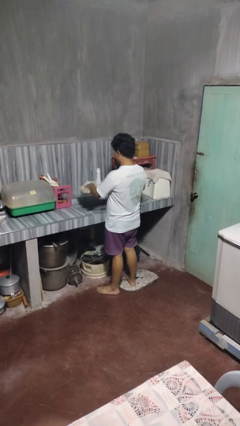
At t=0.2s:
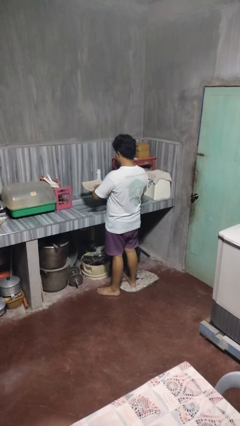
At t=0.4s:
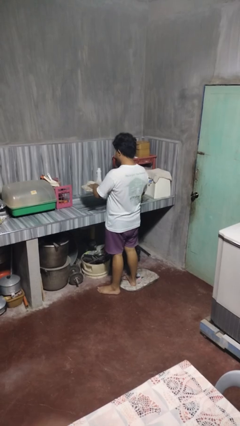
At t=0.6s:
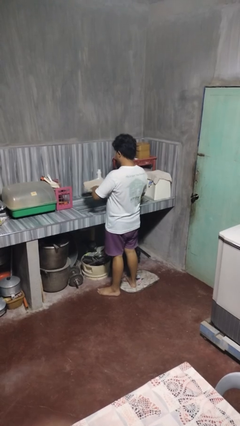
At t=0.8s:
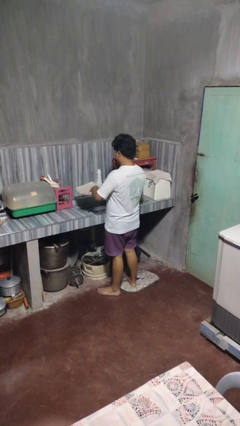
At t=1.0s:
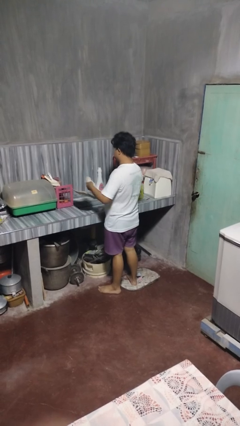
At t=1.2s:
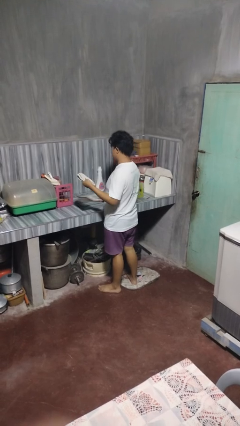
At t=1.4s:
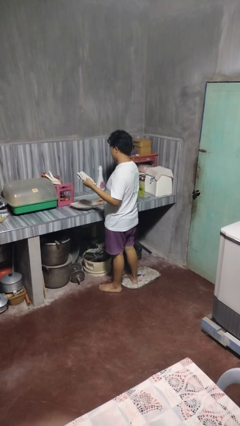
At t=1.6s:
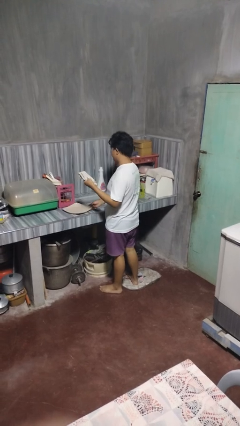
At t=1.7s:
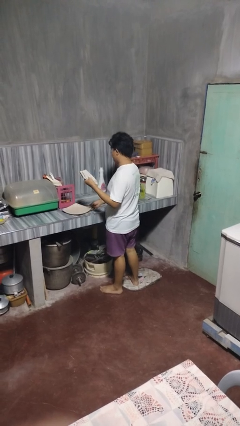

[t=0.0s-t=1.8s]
person dries dish

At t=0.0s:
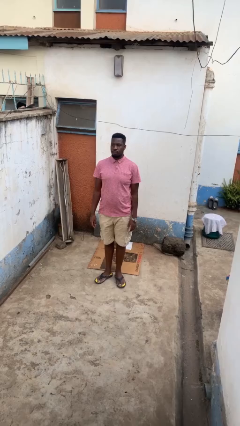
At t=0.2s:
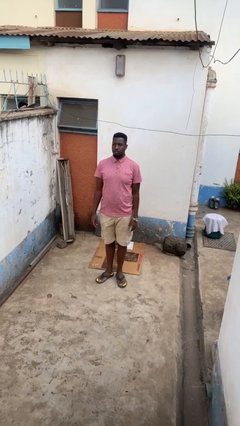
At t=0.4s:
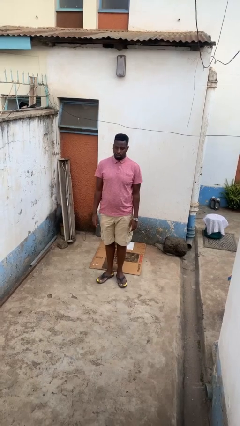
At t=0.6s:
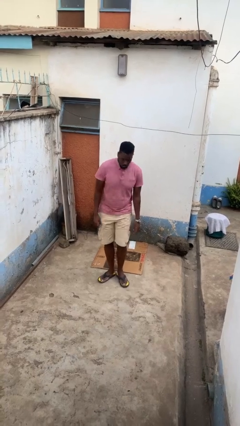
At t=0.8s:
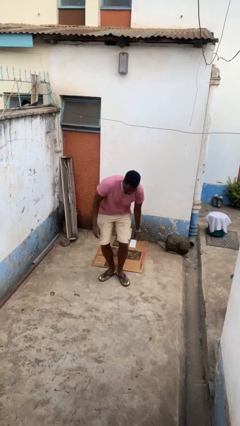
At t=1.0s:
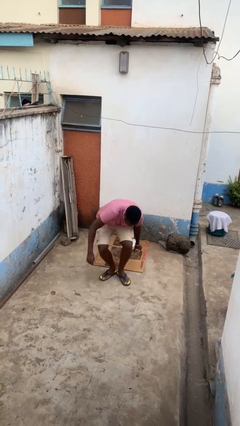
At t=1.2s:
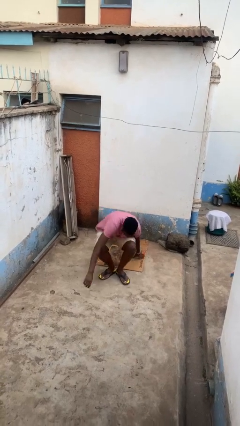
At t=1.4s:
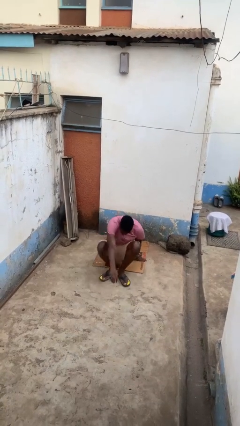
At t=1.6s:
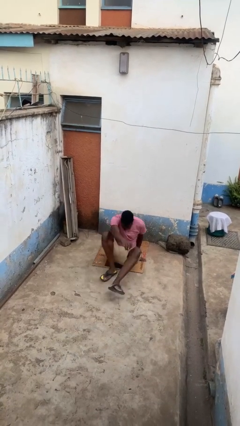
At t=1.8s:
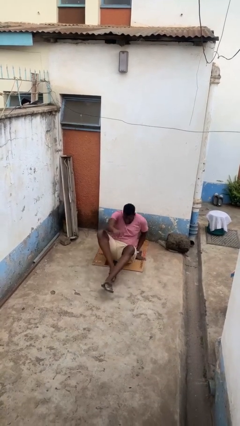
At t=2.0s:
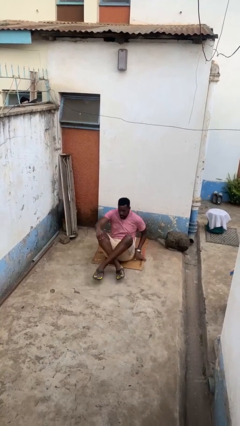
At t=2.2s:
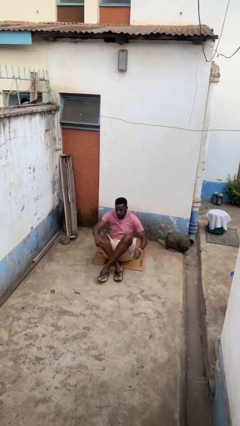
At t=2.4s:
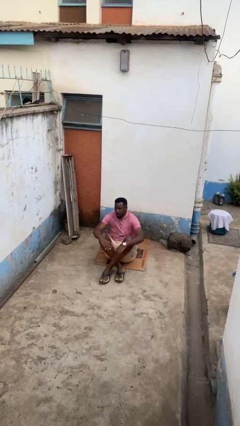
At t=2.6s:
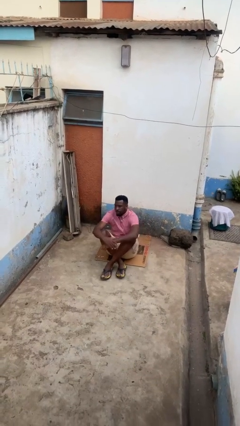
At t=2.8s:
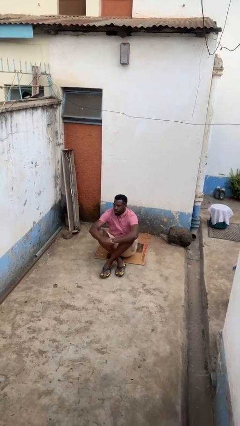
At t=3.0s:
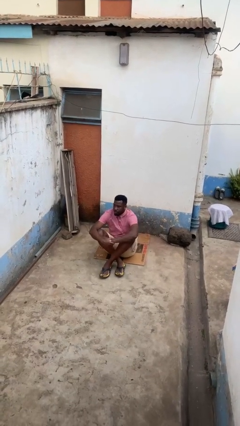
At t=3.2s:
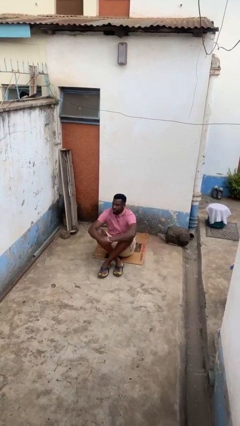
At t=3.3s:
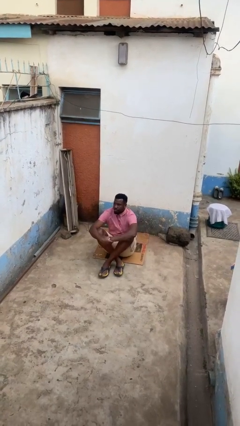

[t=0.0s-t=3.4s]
person sits crisscross

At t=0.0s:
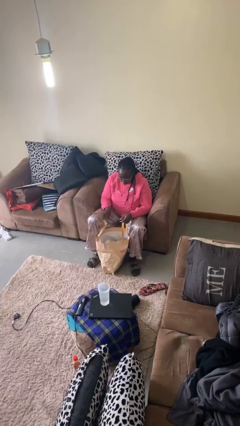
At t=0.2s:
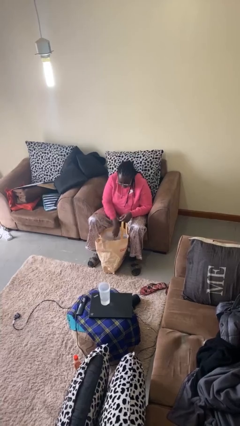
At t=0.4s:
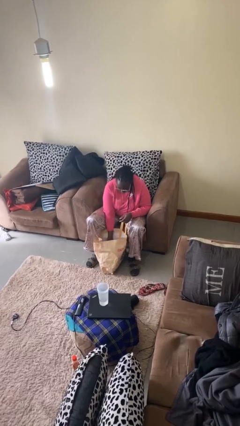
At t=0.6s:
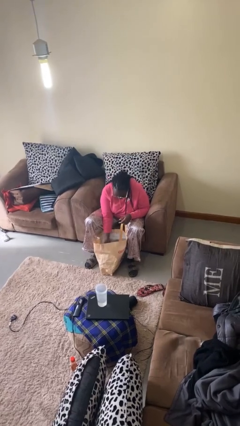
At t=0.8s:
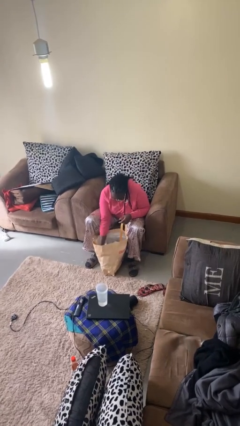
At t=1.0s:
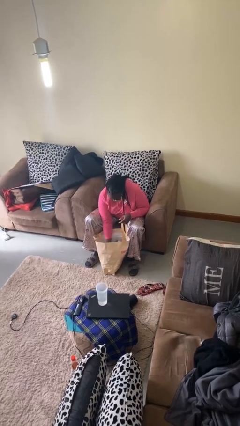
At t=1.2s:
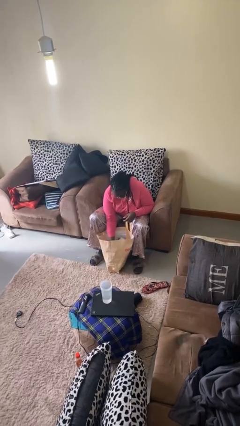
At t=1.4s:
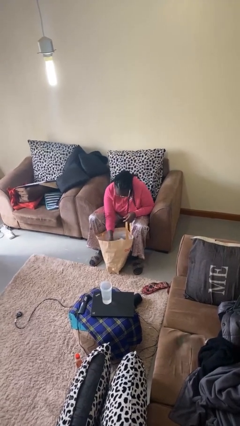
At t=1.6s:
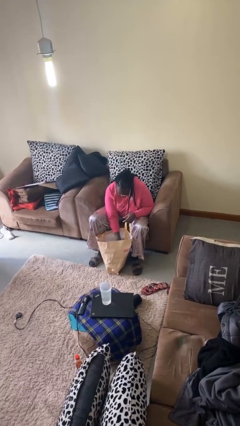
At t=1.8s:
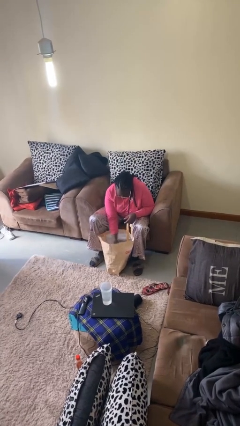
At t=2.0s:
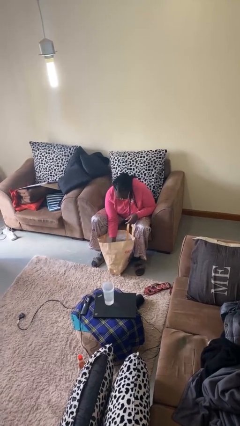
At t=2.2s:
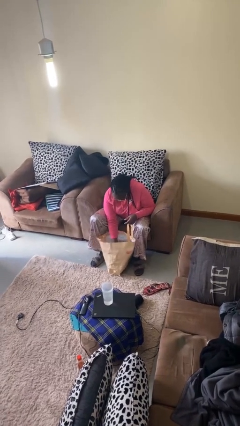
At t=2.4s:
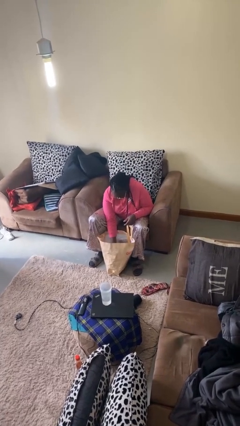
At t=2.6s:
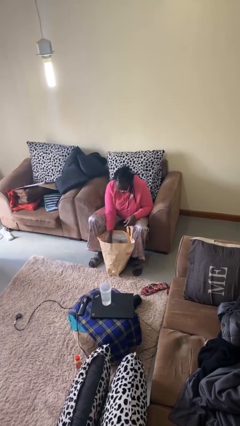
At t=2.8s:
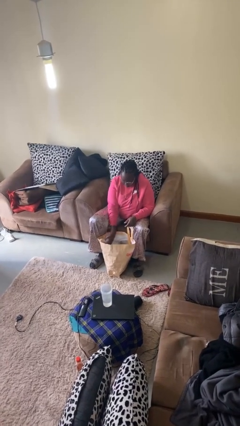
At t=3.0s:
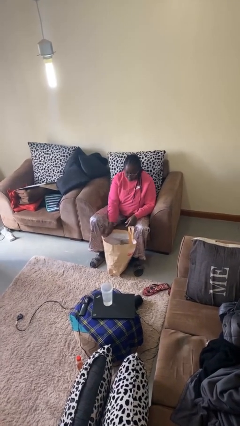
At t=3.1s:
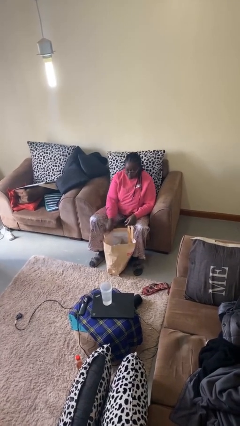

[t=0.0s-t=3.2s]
person searches in bag

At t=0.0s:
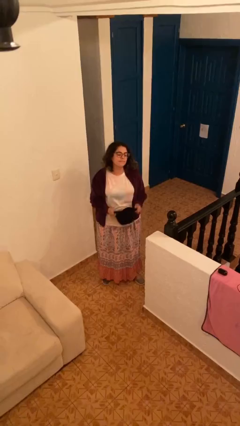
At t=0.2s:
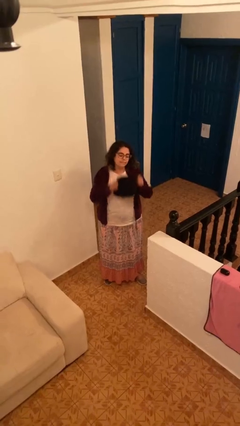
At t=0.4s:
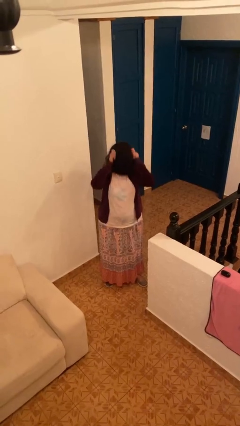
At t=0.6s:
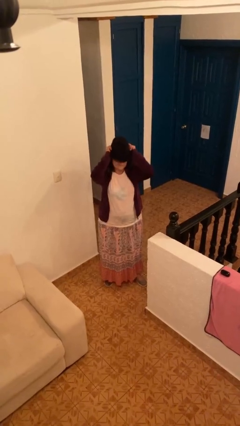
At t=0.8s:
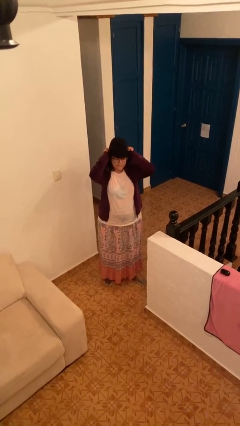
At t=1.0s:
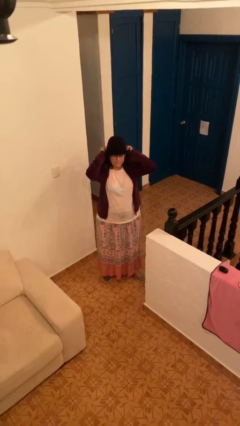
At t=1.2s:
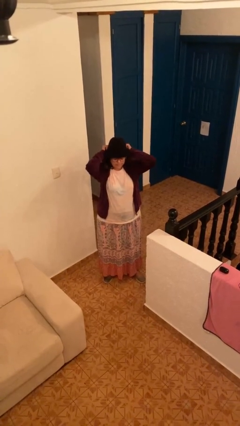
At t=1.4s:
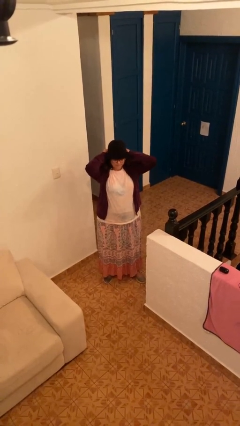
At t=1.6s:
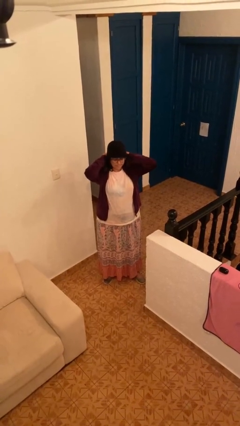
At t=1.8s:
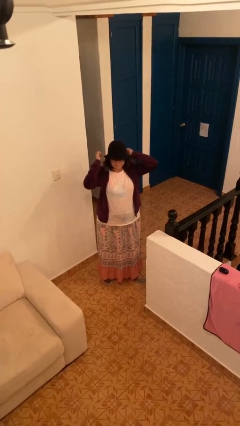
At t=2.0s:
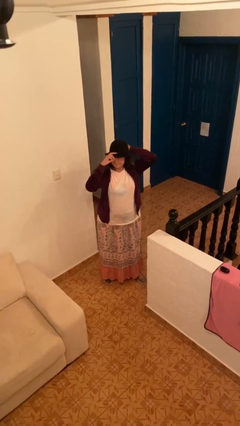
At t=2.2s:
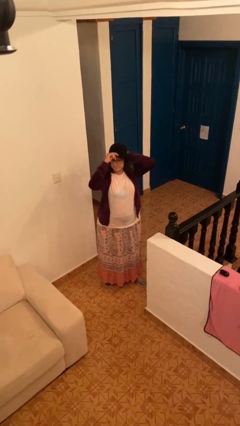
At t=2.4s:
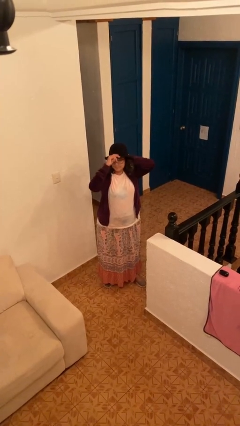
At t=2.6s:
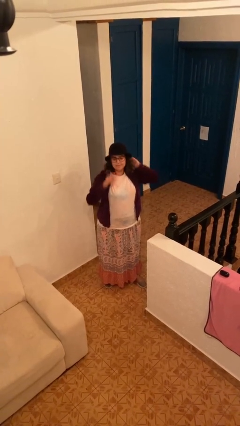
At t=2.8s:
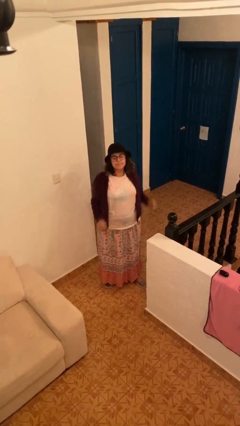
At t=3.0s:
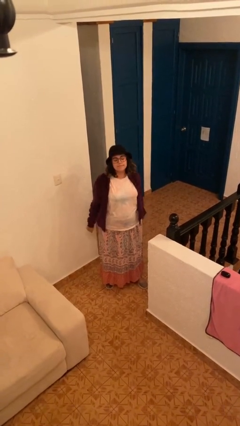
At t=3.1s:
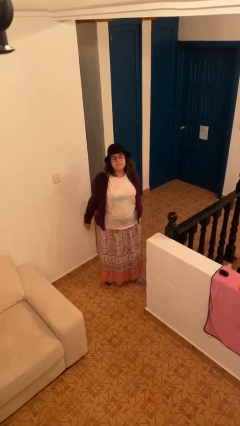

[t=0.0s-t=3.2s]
person puts on hat

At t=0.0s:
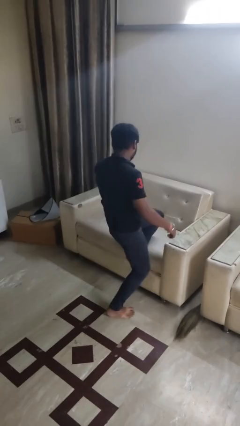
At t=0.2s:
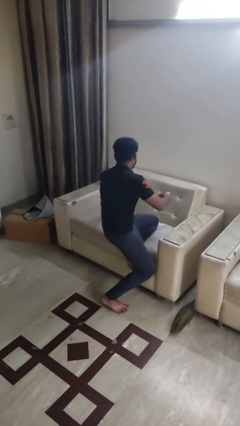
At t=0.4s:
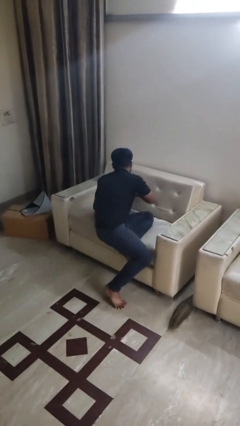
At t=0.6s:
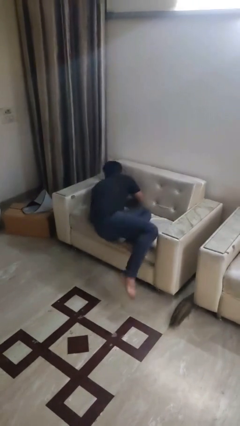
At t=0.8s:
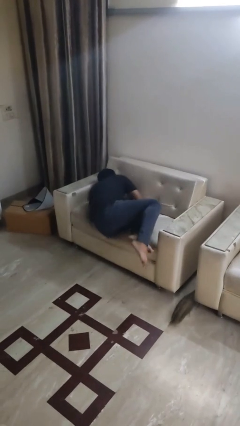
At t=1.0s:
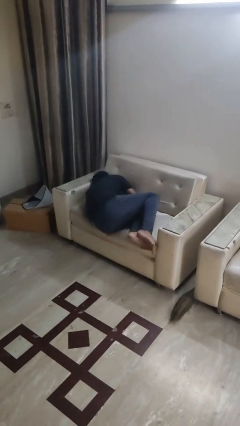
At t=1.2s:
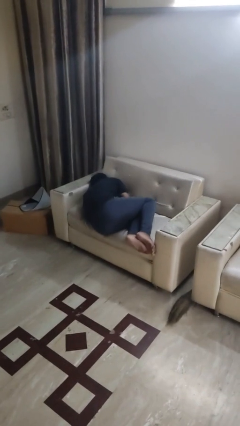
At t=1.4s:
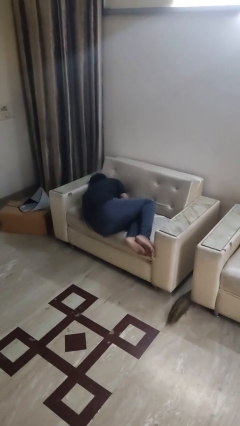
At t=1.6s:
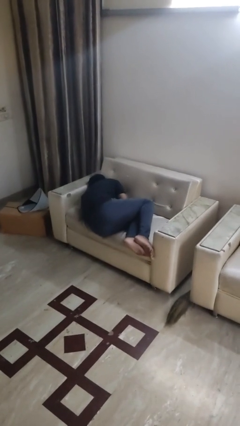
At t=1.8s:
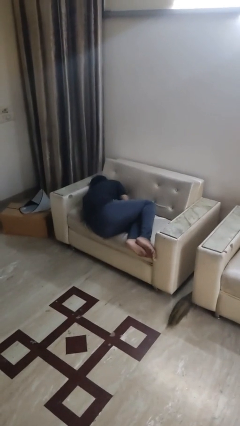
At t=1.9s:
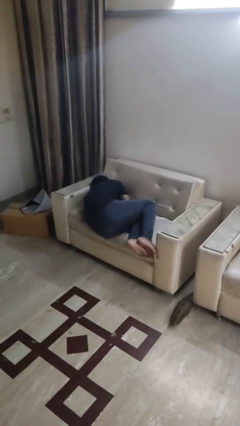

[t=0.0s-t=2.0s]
person lies down on bed

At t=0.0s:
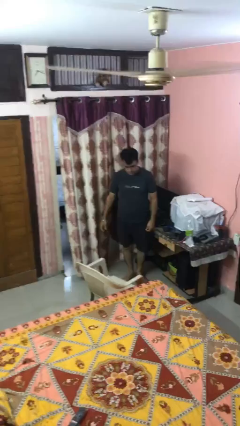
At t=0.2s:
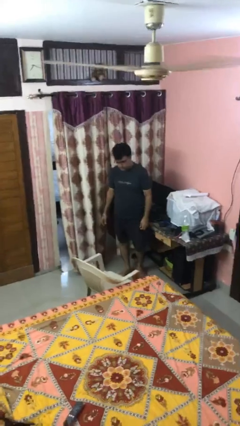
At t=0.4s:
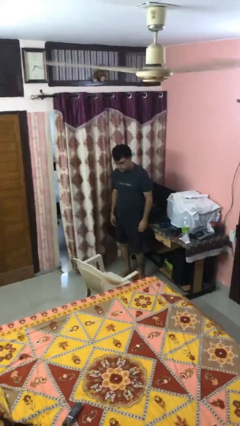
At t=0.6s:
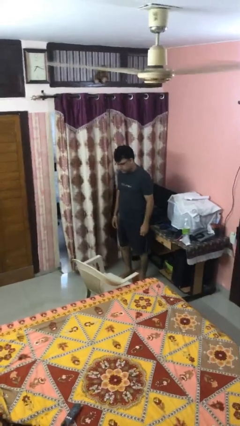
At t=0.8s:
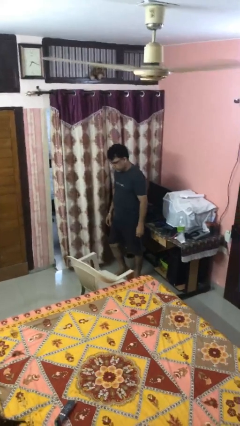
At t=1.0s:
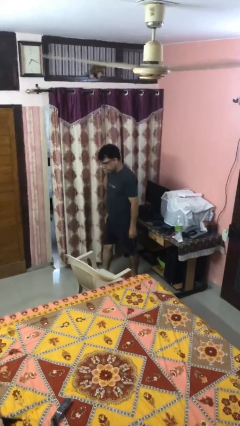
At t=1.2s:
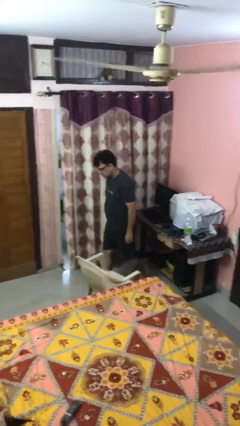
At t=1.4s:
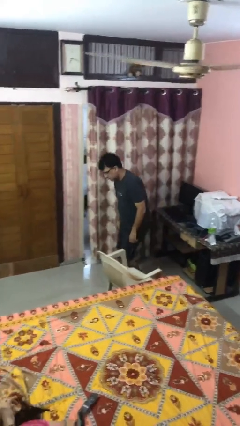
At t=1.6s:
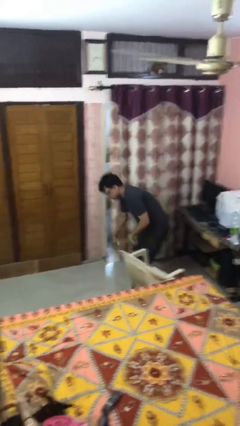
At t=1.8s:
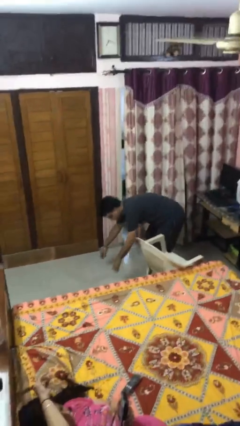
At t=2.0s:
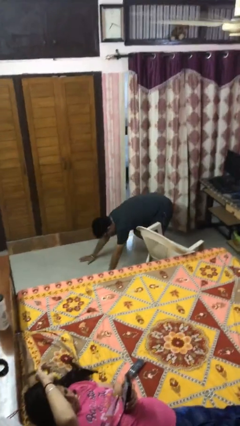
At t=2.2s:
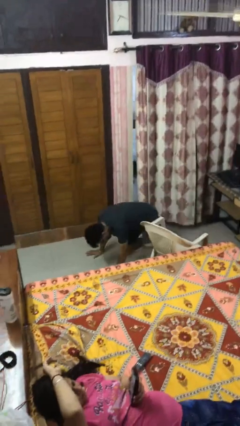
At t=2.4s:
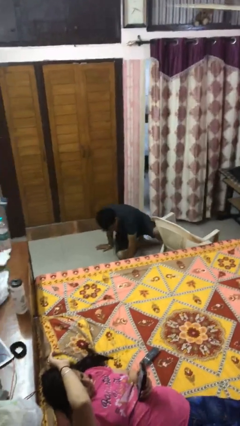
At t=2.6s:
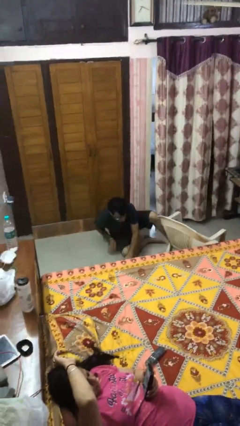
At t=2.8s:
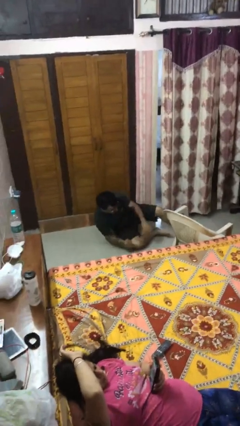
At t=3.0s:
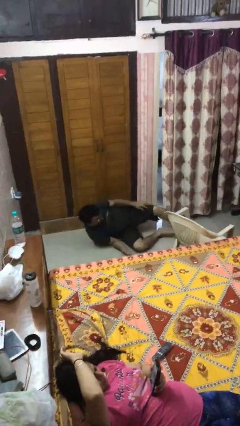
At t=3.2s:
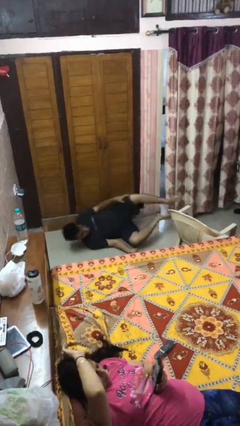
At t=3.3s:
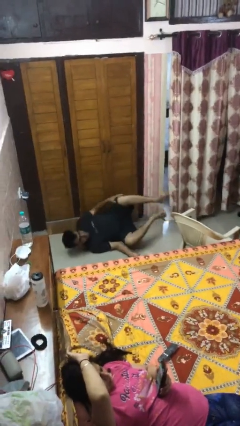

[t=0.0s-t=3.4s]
person trips on object on floor

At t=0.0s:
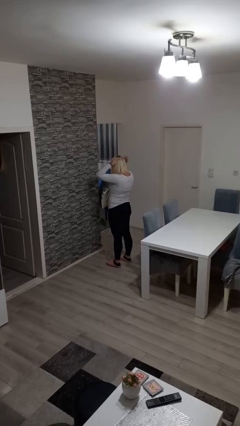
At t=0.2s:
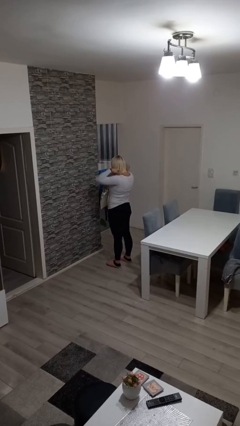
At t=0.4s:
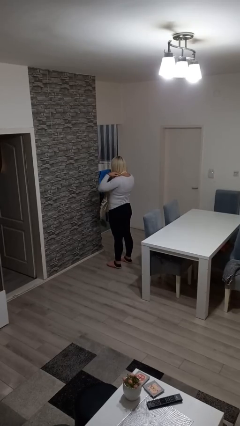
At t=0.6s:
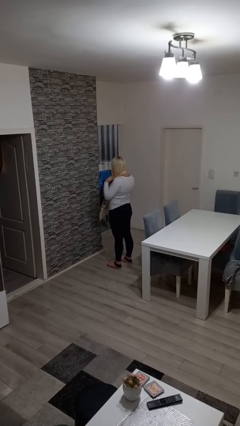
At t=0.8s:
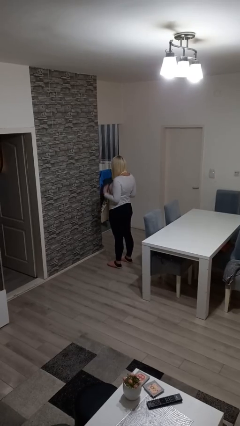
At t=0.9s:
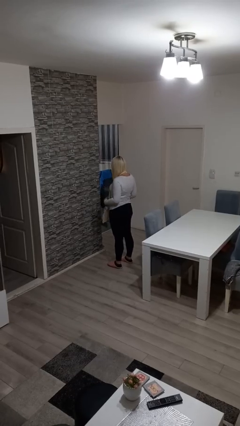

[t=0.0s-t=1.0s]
person puts on apron
